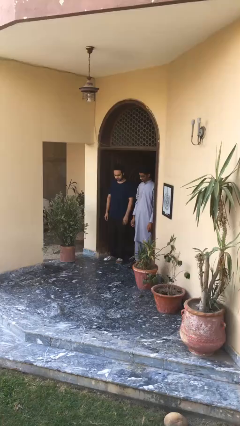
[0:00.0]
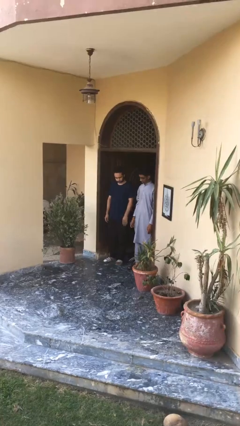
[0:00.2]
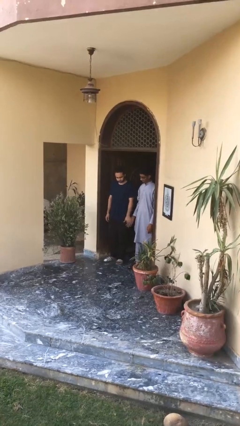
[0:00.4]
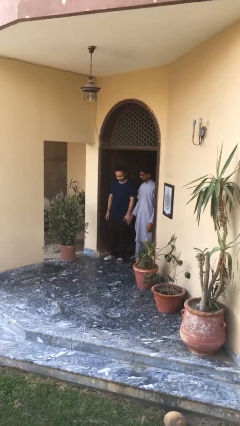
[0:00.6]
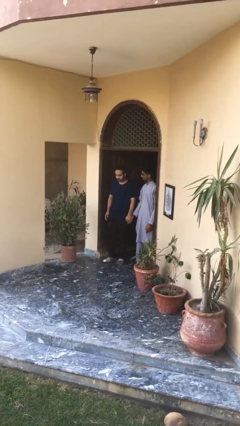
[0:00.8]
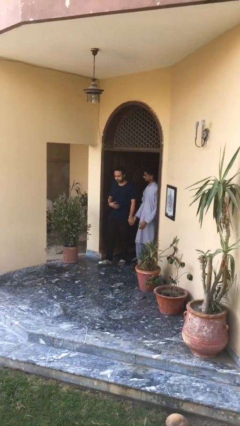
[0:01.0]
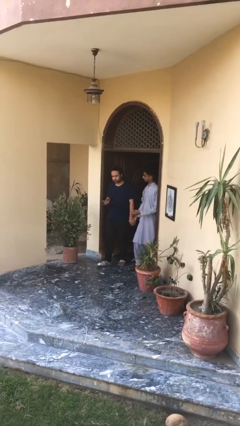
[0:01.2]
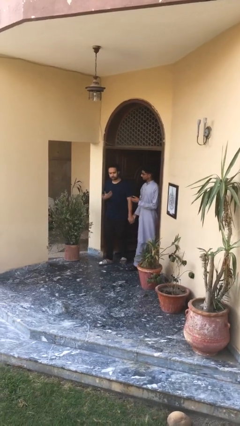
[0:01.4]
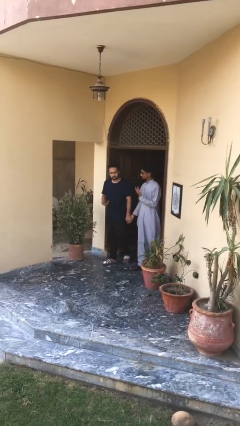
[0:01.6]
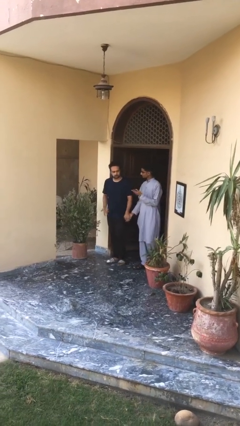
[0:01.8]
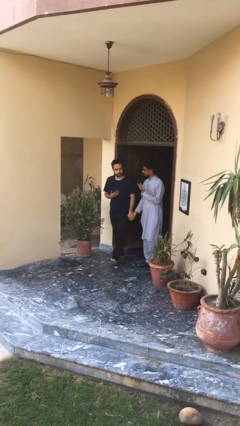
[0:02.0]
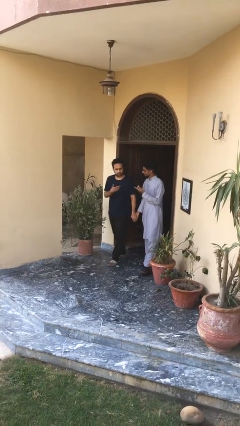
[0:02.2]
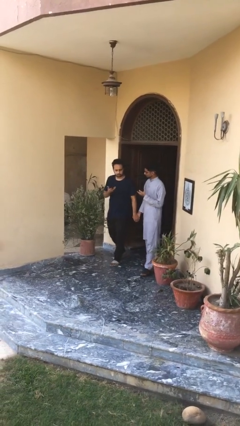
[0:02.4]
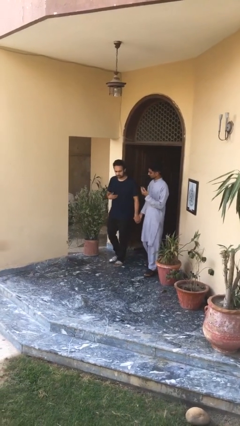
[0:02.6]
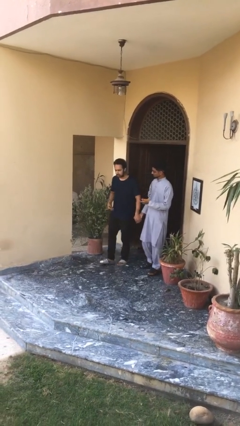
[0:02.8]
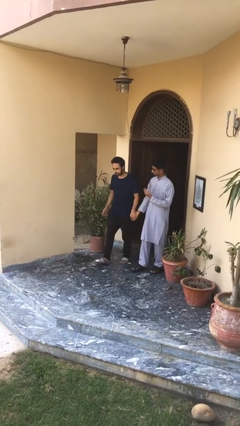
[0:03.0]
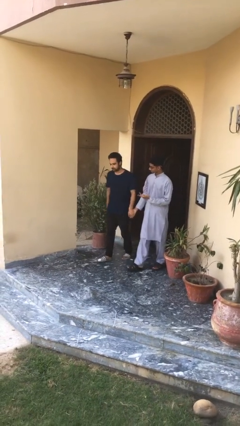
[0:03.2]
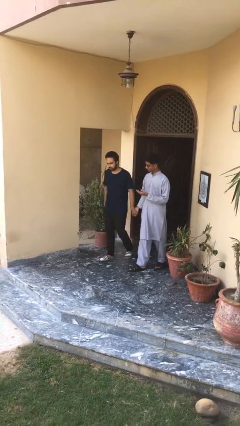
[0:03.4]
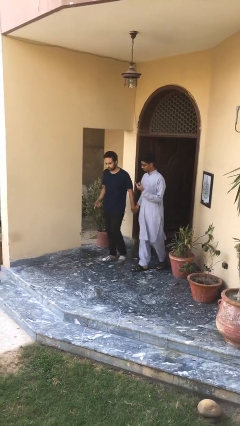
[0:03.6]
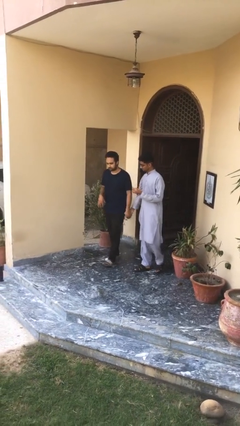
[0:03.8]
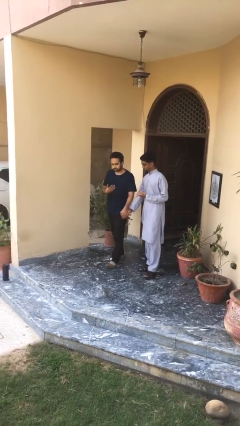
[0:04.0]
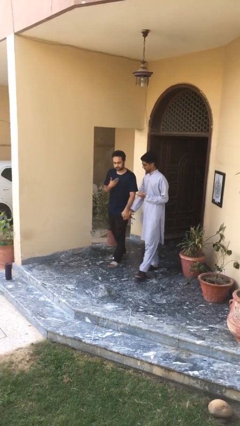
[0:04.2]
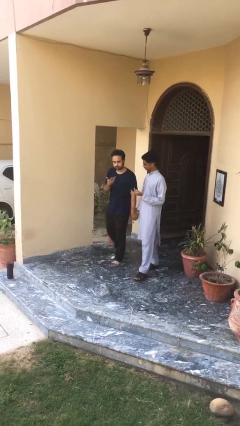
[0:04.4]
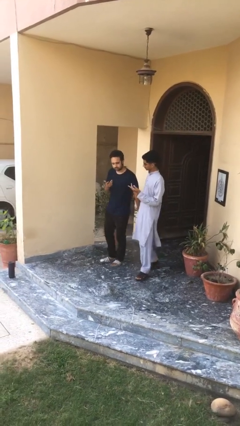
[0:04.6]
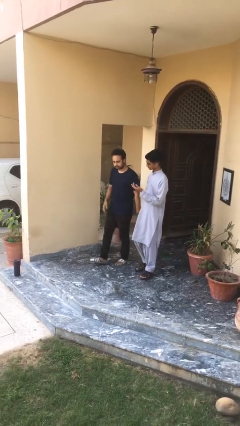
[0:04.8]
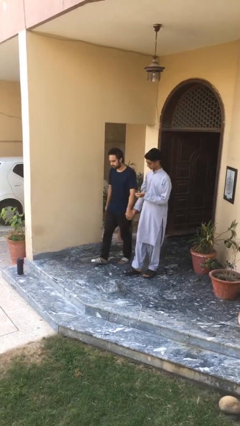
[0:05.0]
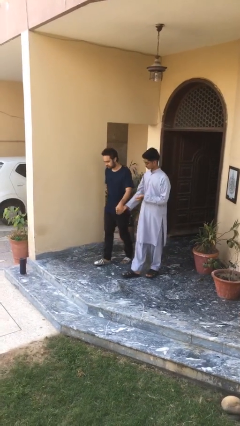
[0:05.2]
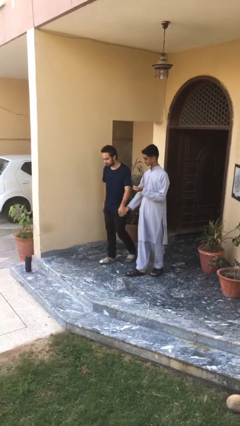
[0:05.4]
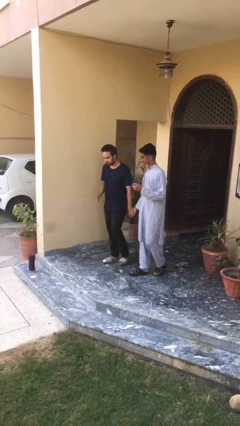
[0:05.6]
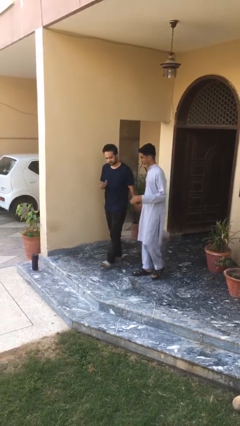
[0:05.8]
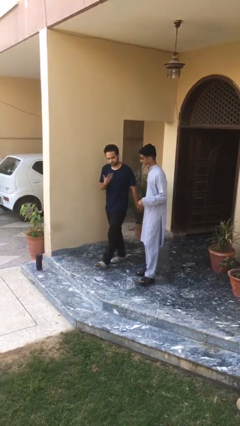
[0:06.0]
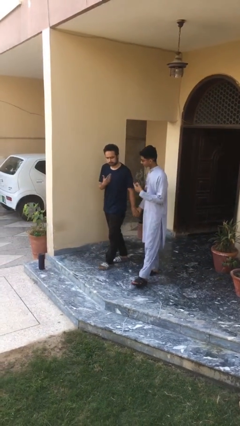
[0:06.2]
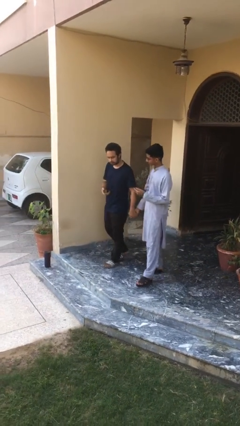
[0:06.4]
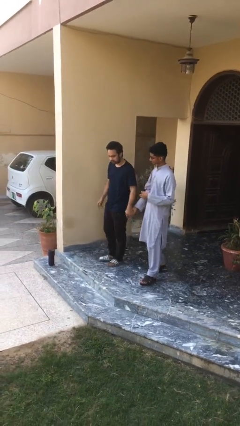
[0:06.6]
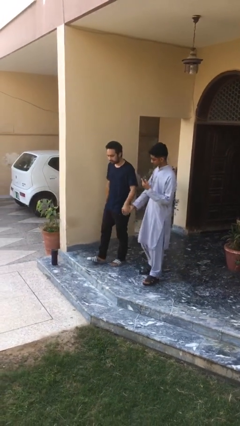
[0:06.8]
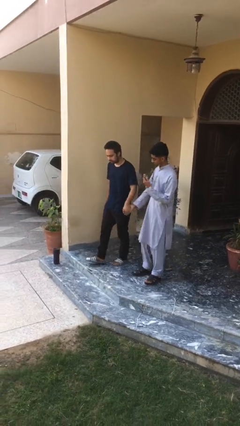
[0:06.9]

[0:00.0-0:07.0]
person holds hand

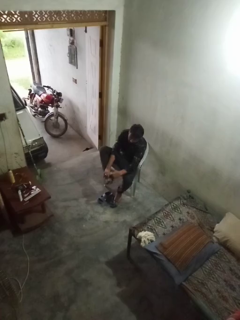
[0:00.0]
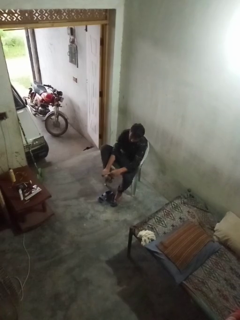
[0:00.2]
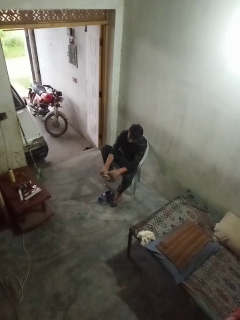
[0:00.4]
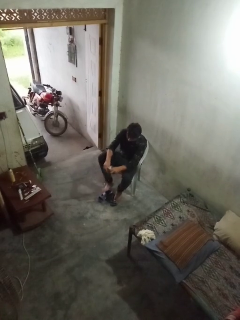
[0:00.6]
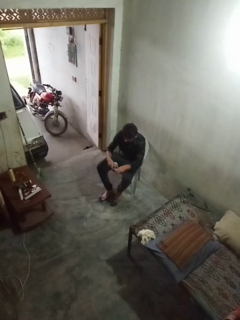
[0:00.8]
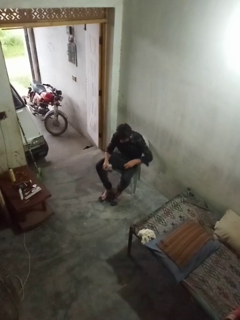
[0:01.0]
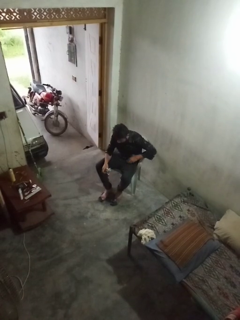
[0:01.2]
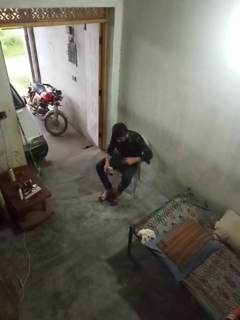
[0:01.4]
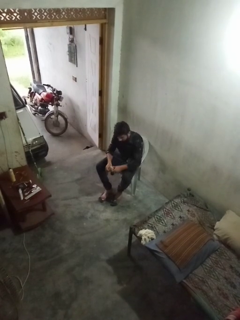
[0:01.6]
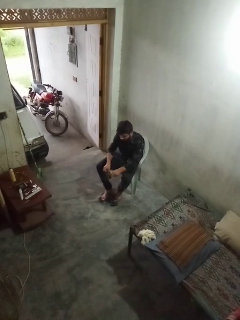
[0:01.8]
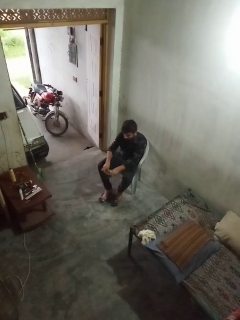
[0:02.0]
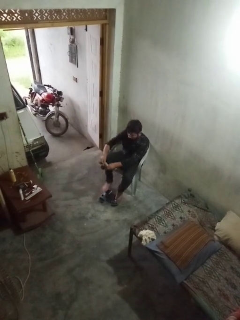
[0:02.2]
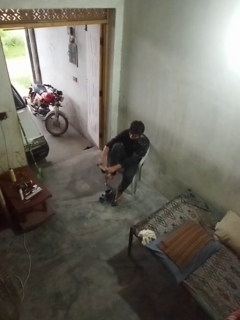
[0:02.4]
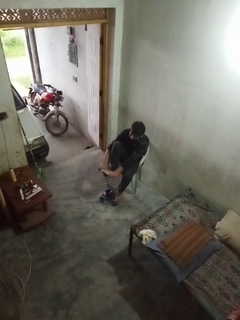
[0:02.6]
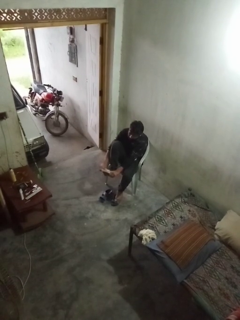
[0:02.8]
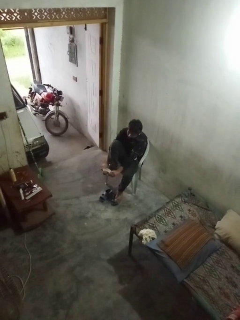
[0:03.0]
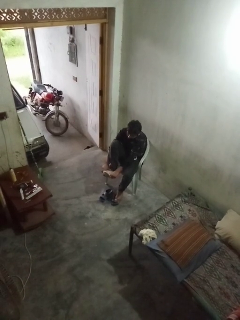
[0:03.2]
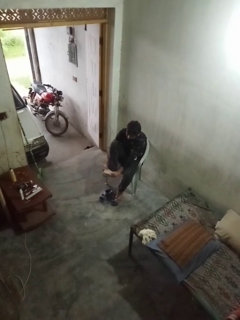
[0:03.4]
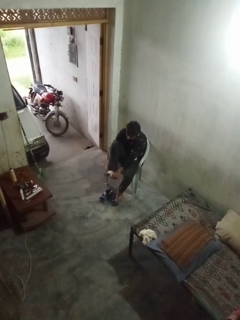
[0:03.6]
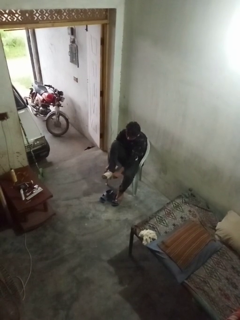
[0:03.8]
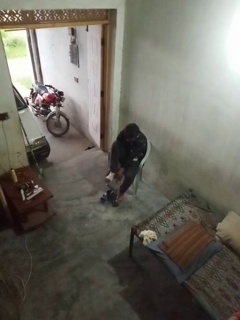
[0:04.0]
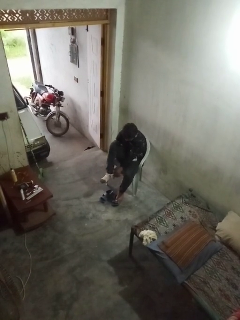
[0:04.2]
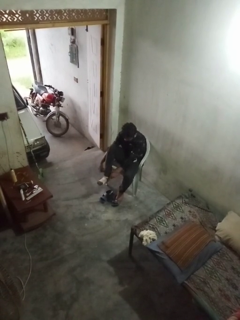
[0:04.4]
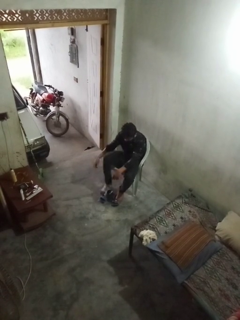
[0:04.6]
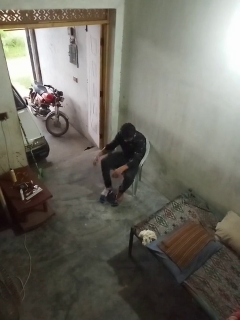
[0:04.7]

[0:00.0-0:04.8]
person puts on socks

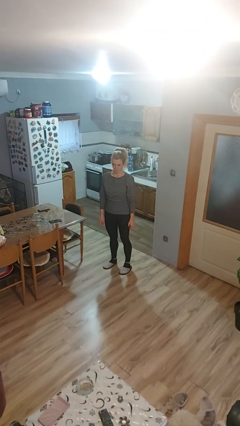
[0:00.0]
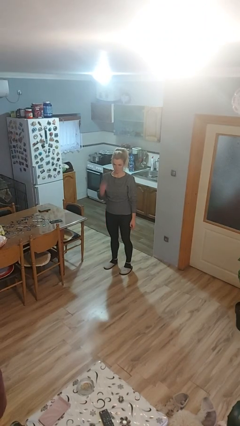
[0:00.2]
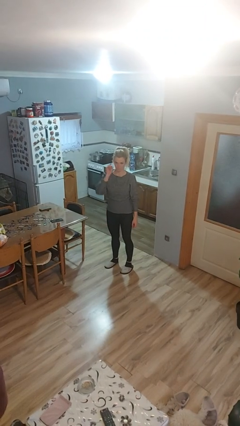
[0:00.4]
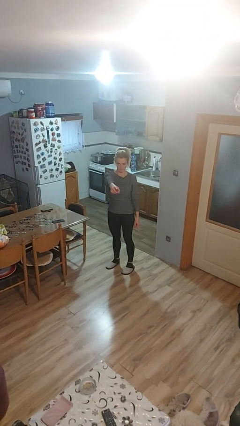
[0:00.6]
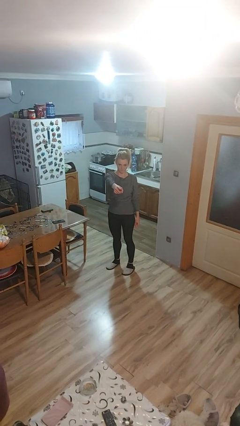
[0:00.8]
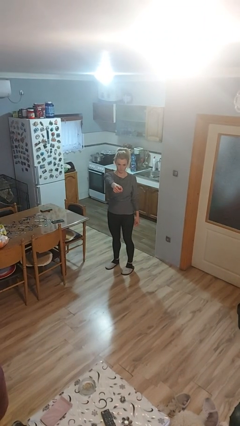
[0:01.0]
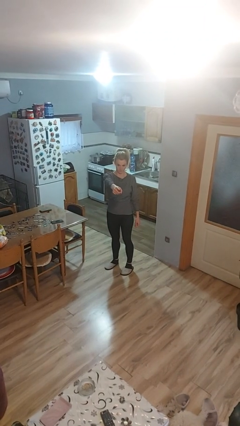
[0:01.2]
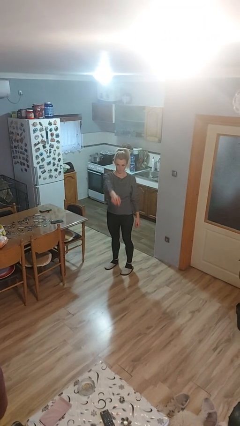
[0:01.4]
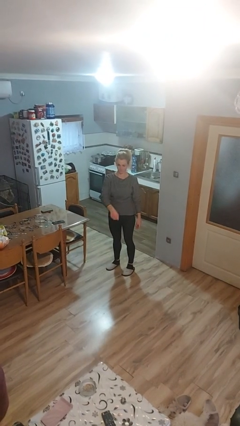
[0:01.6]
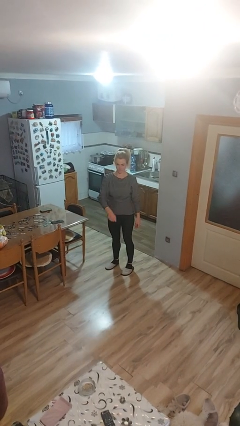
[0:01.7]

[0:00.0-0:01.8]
person points at person

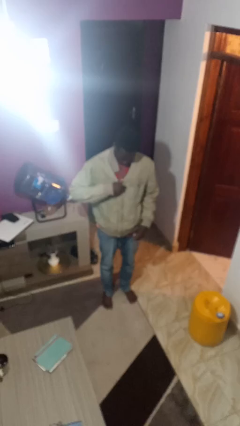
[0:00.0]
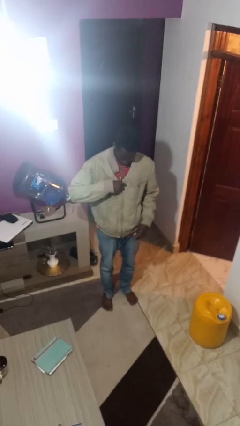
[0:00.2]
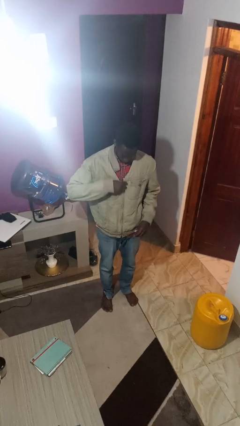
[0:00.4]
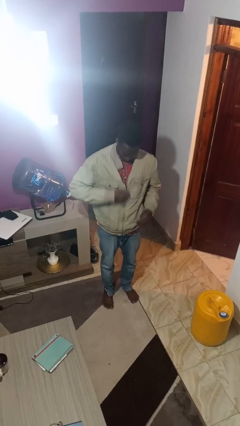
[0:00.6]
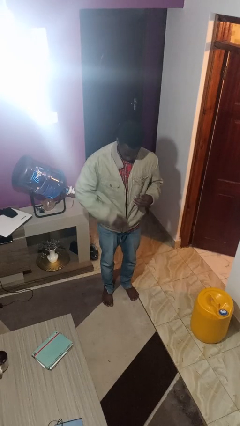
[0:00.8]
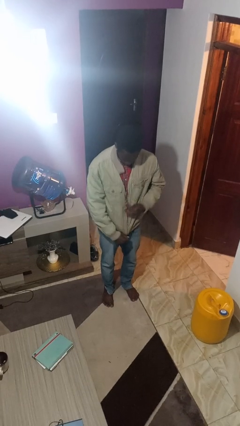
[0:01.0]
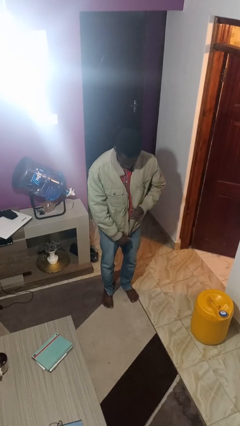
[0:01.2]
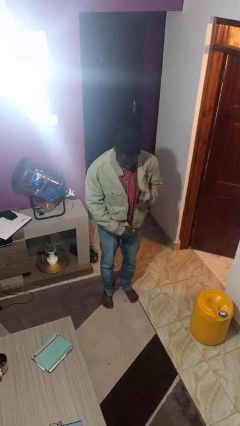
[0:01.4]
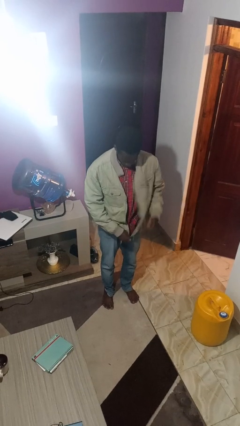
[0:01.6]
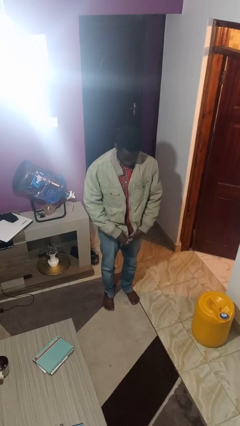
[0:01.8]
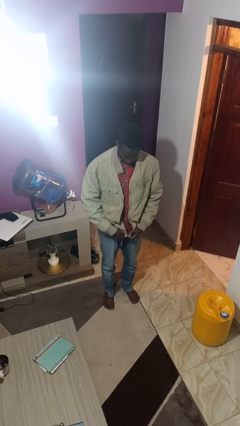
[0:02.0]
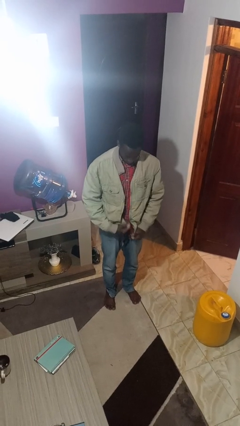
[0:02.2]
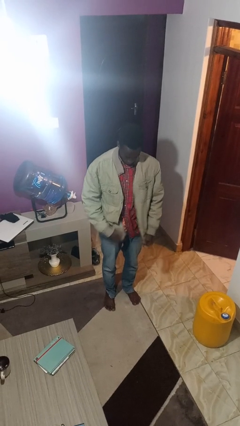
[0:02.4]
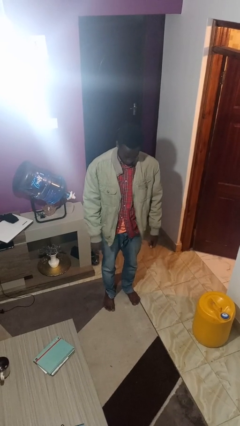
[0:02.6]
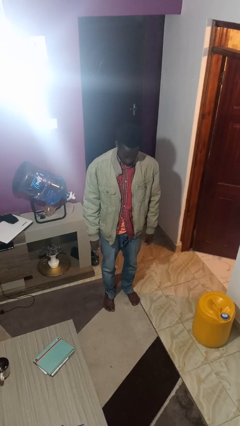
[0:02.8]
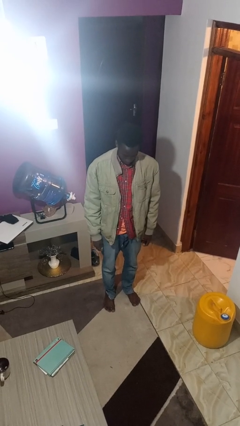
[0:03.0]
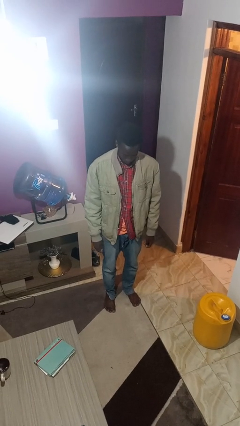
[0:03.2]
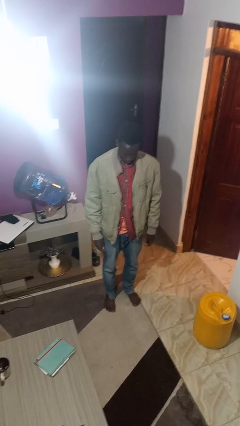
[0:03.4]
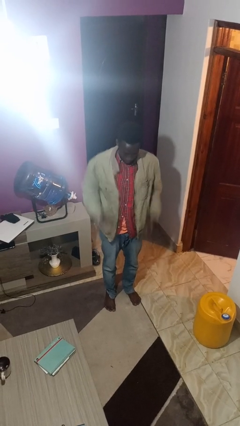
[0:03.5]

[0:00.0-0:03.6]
person unzips jacket

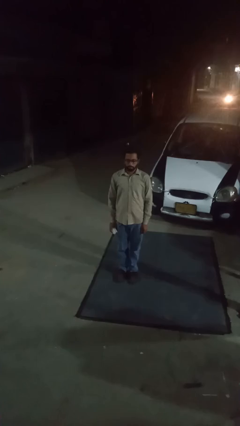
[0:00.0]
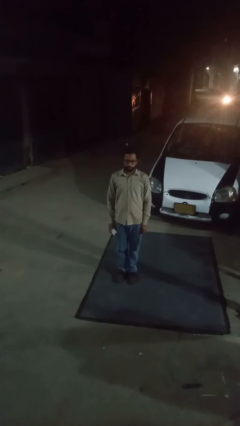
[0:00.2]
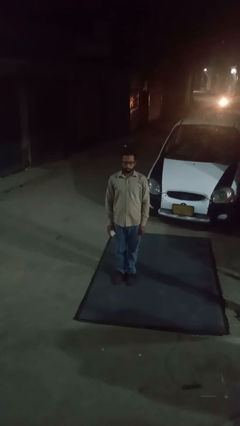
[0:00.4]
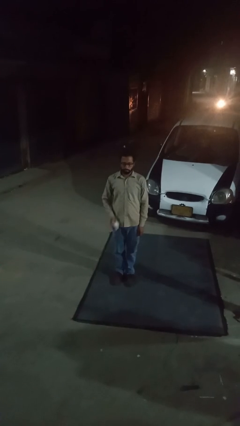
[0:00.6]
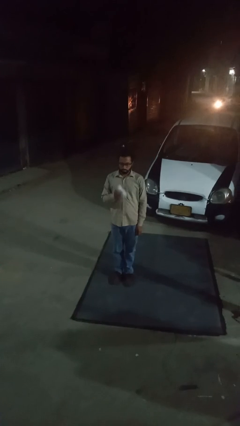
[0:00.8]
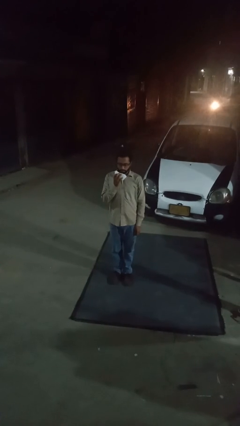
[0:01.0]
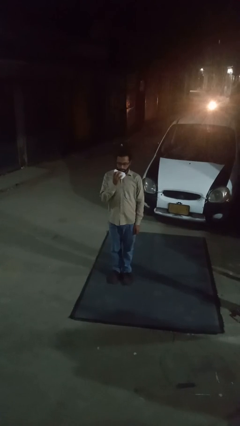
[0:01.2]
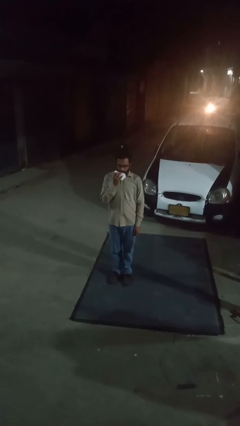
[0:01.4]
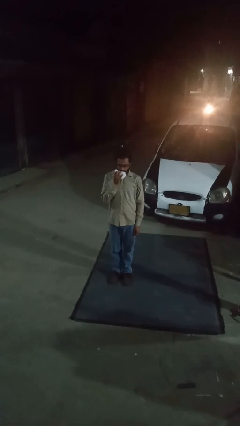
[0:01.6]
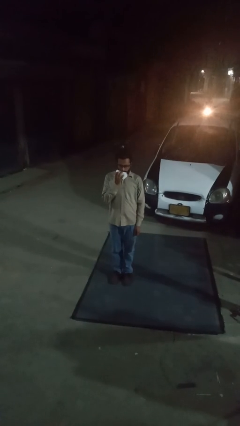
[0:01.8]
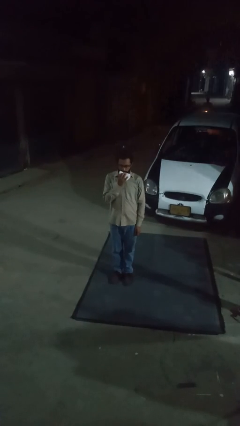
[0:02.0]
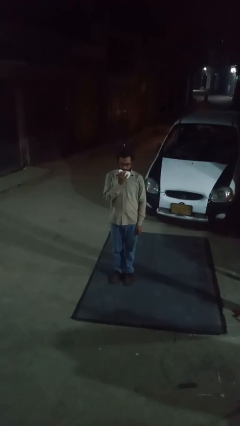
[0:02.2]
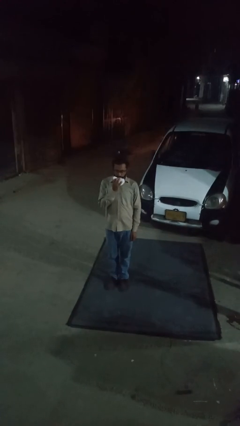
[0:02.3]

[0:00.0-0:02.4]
person wipes mouth with napkin
